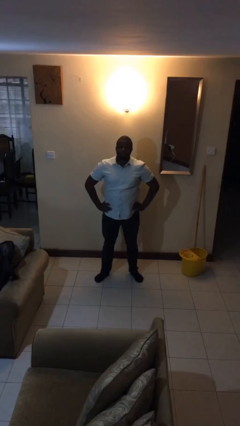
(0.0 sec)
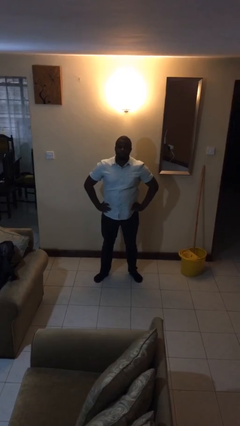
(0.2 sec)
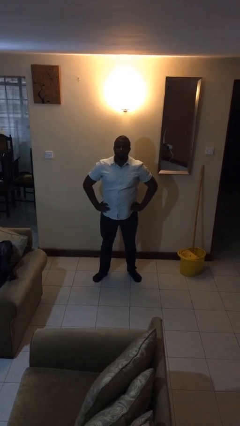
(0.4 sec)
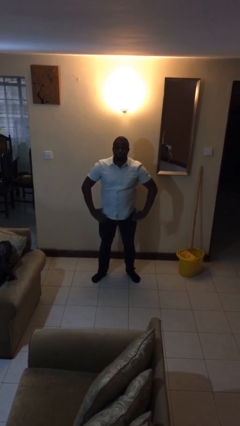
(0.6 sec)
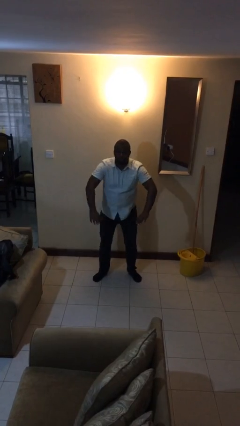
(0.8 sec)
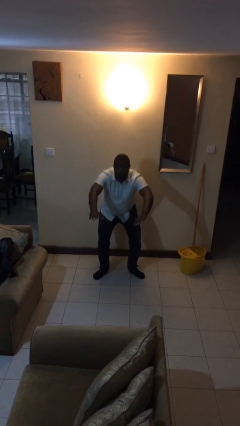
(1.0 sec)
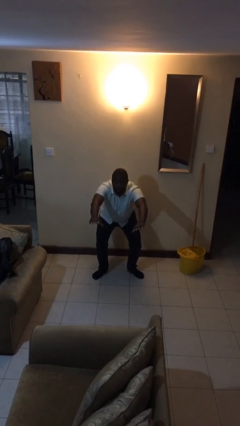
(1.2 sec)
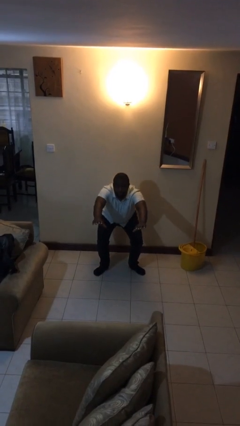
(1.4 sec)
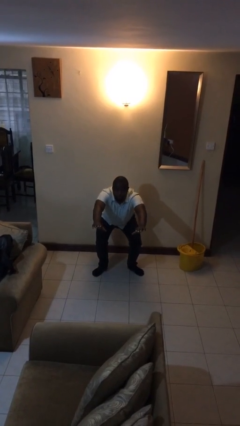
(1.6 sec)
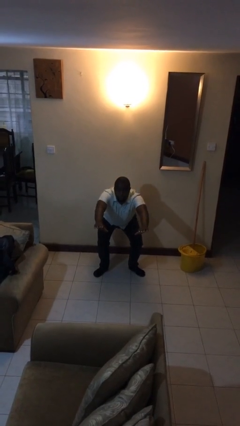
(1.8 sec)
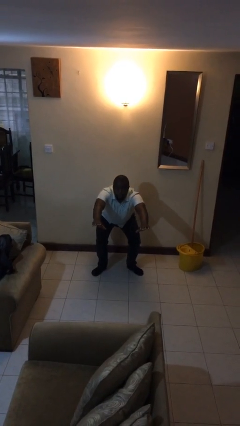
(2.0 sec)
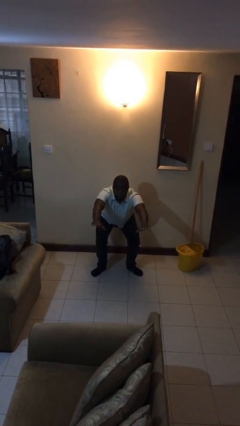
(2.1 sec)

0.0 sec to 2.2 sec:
person squats

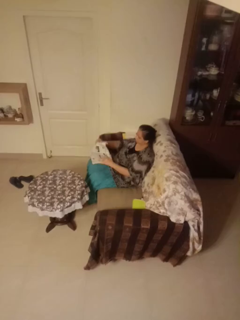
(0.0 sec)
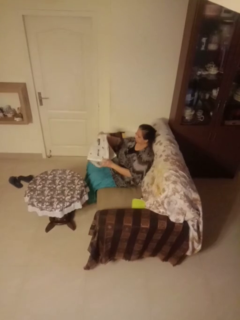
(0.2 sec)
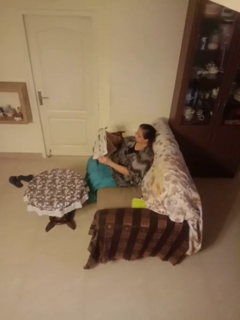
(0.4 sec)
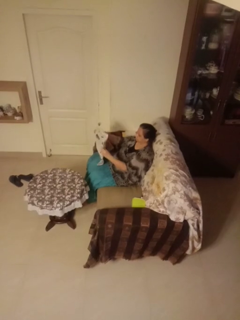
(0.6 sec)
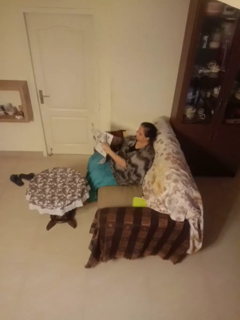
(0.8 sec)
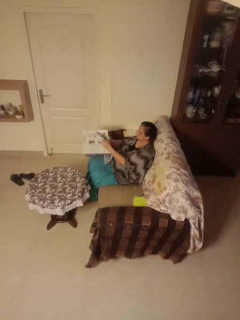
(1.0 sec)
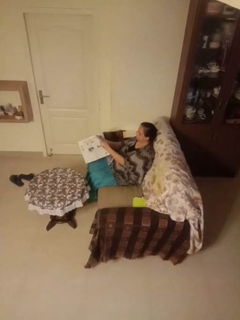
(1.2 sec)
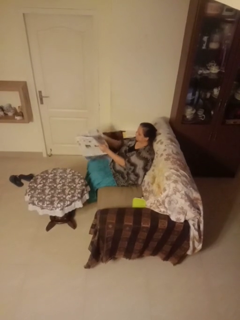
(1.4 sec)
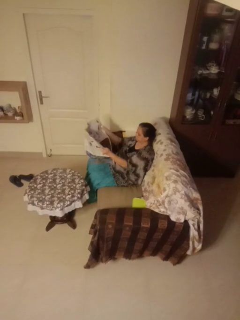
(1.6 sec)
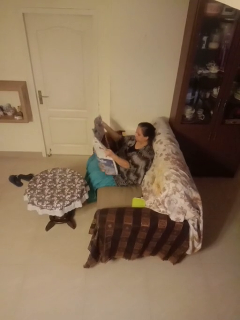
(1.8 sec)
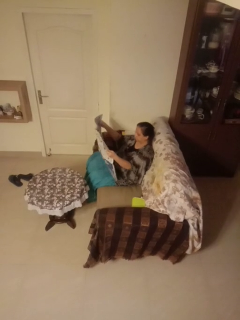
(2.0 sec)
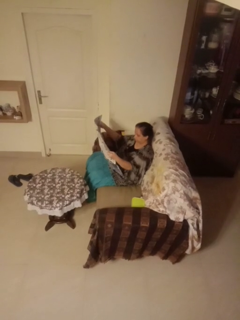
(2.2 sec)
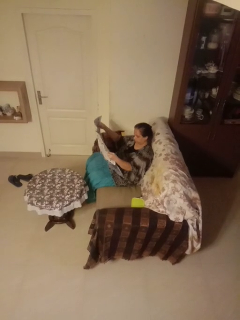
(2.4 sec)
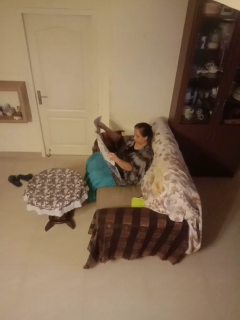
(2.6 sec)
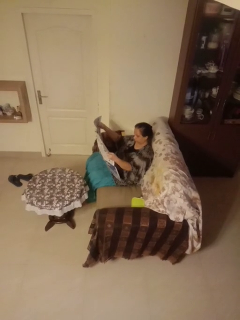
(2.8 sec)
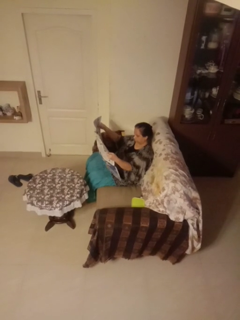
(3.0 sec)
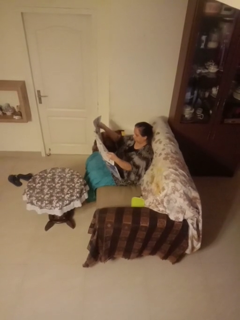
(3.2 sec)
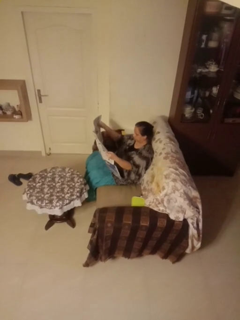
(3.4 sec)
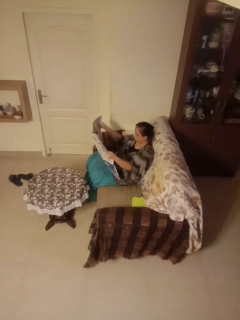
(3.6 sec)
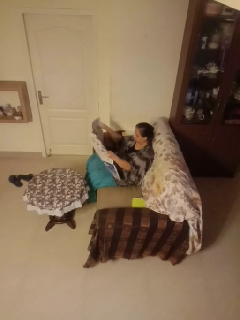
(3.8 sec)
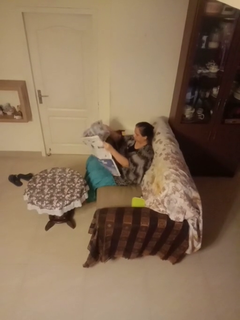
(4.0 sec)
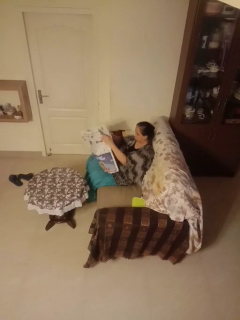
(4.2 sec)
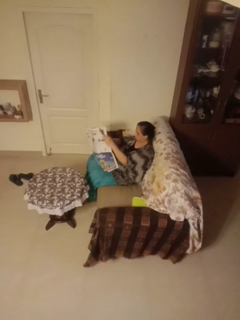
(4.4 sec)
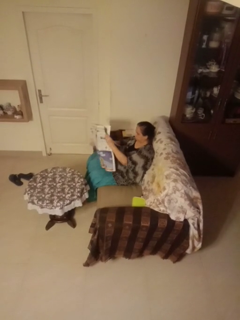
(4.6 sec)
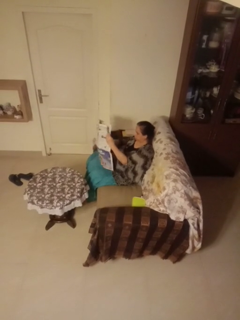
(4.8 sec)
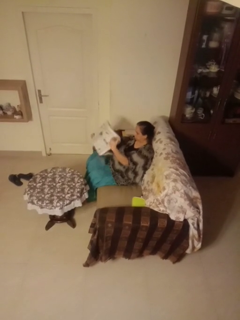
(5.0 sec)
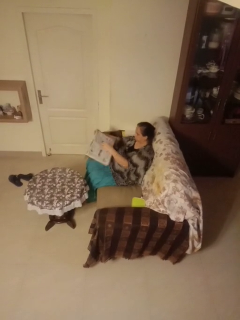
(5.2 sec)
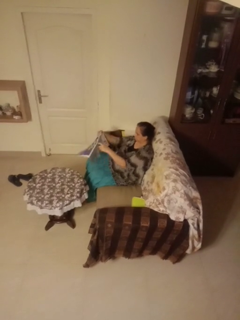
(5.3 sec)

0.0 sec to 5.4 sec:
person reads newspaper

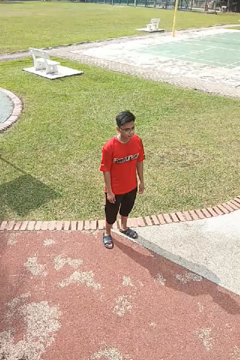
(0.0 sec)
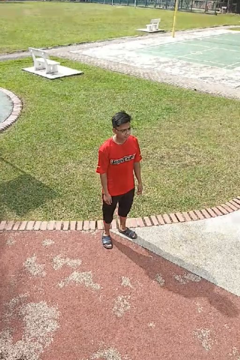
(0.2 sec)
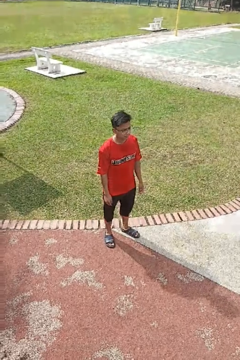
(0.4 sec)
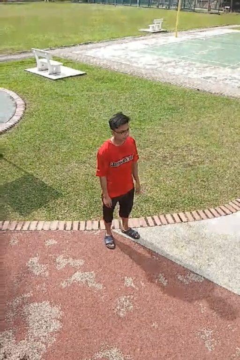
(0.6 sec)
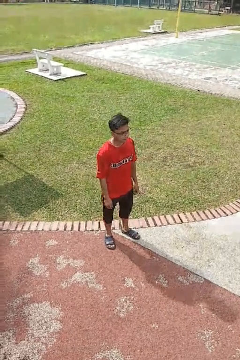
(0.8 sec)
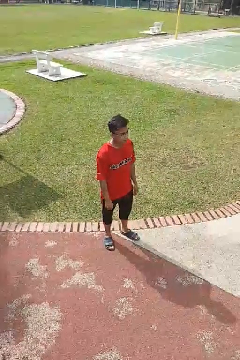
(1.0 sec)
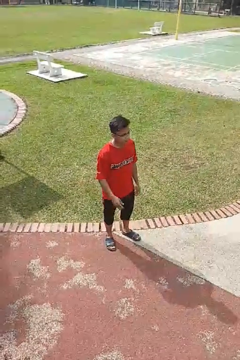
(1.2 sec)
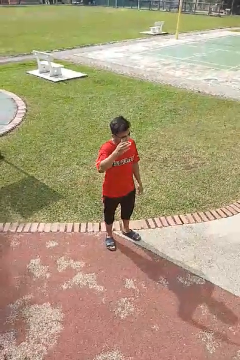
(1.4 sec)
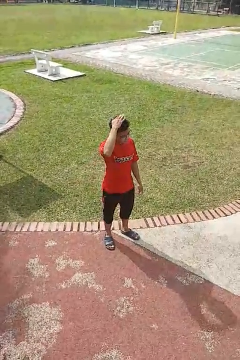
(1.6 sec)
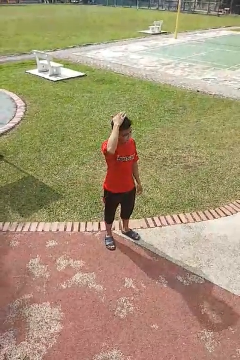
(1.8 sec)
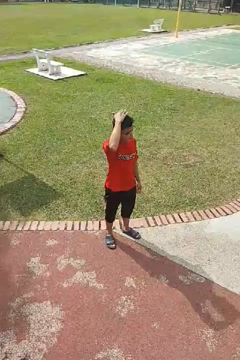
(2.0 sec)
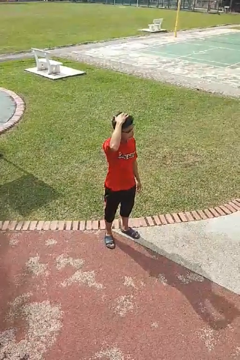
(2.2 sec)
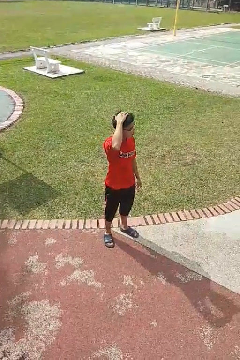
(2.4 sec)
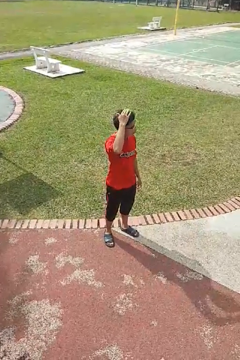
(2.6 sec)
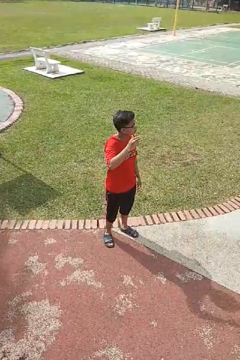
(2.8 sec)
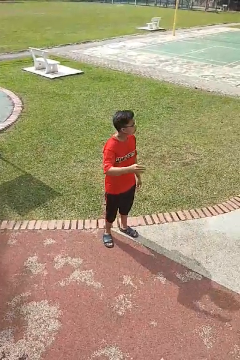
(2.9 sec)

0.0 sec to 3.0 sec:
person pats head

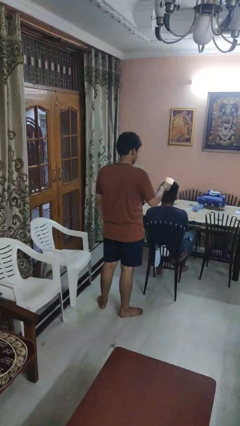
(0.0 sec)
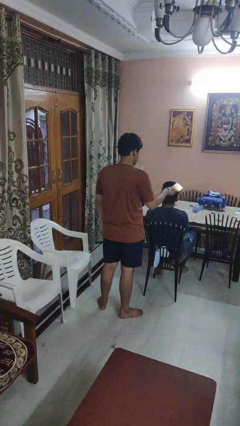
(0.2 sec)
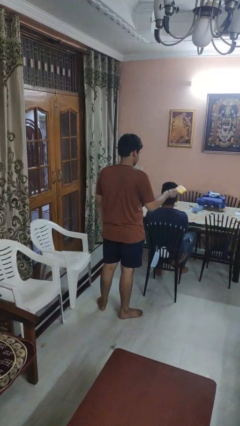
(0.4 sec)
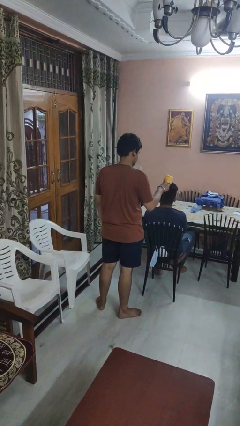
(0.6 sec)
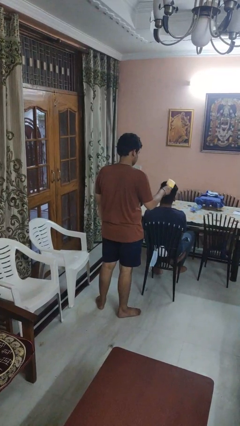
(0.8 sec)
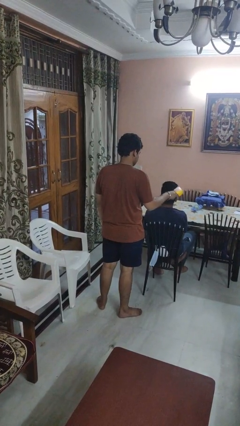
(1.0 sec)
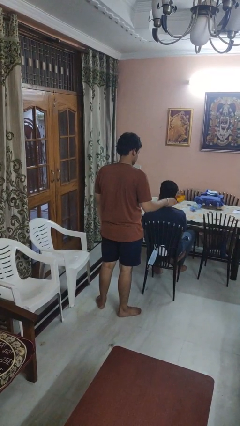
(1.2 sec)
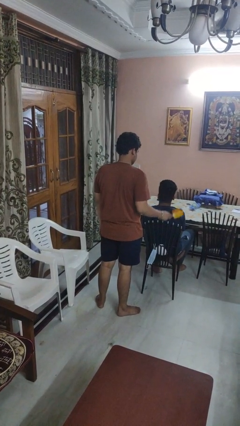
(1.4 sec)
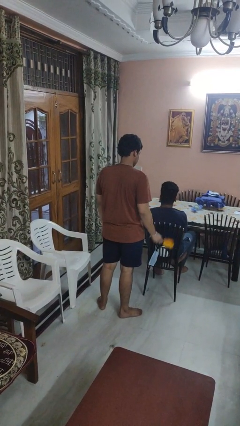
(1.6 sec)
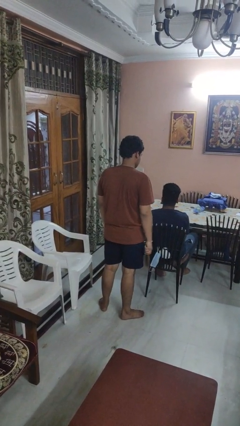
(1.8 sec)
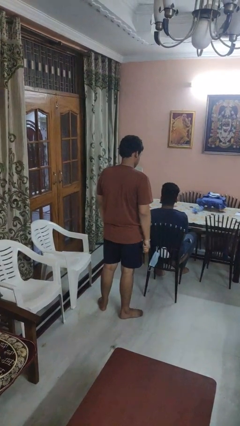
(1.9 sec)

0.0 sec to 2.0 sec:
person brushes hair of person

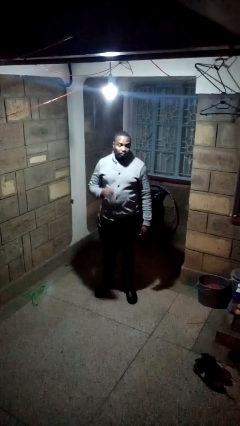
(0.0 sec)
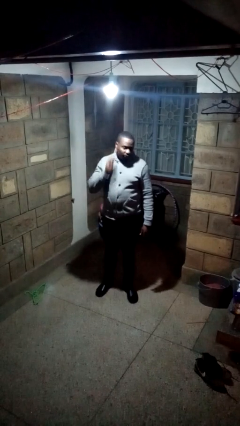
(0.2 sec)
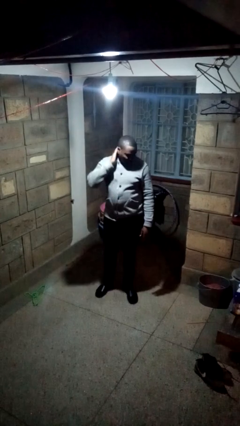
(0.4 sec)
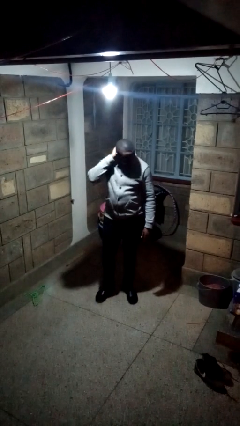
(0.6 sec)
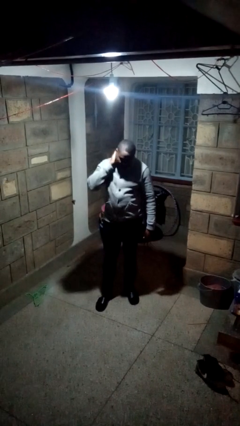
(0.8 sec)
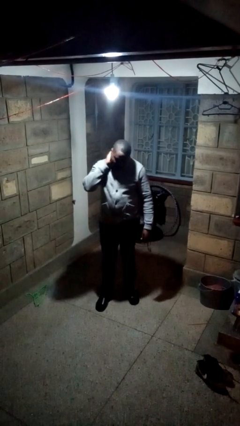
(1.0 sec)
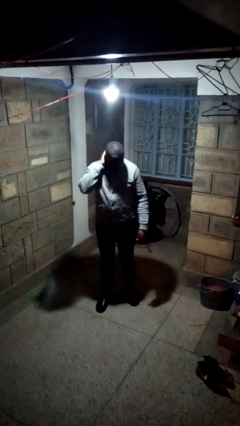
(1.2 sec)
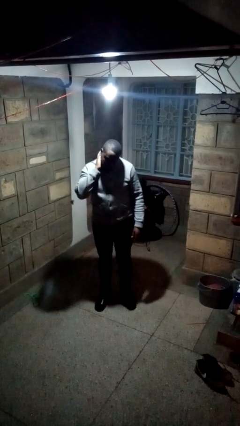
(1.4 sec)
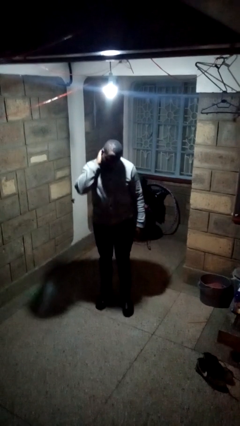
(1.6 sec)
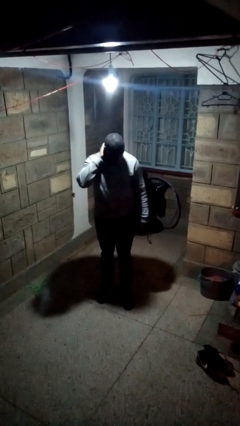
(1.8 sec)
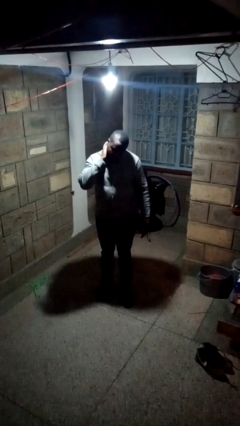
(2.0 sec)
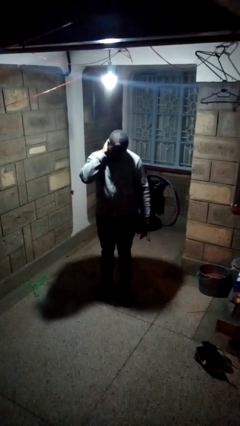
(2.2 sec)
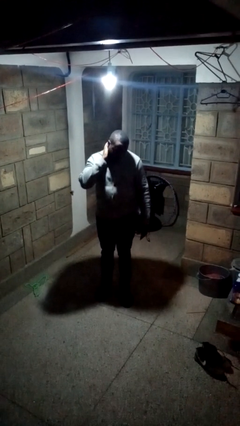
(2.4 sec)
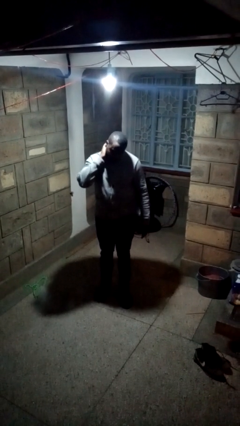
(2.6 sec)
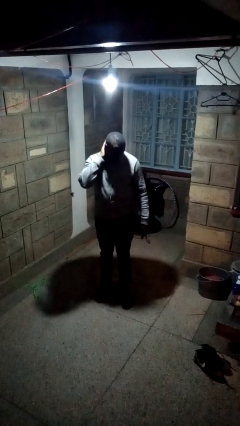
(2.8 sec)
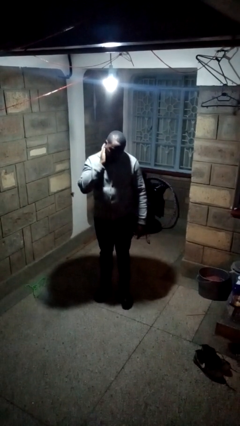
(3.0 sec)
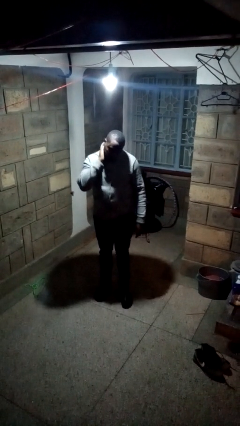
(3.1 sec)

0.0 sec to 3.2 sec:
person rubs neck

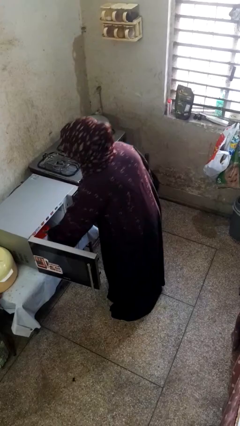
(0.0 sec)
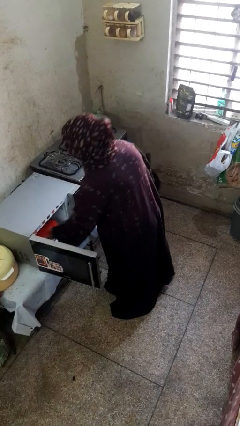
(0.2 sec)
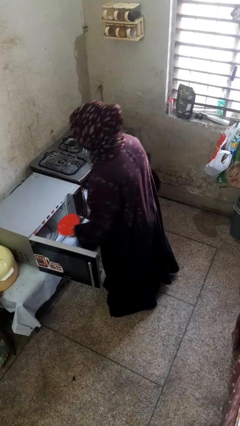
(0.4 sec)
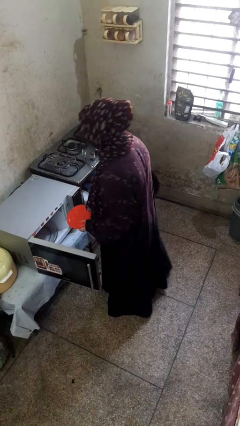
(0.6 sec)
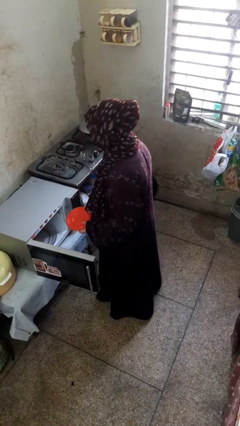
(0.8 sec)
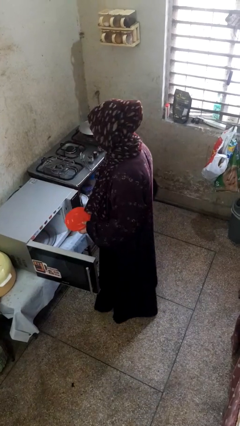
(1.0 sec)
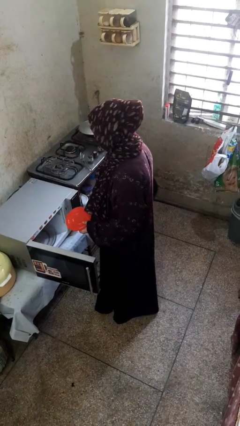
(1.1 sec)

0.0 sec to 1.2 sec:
person takes object from microwave

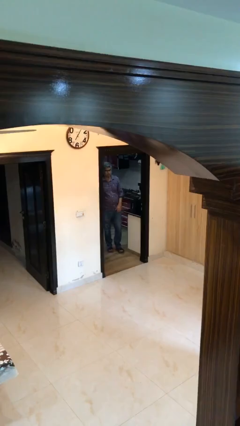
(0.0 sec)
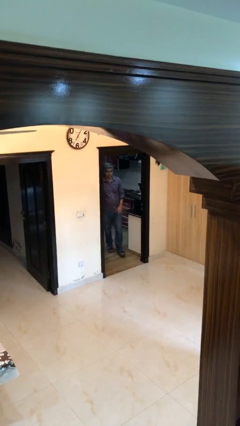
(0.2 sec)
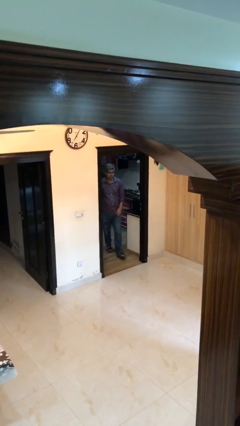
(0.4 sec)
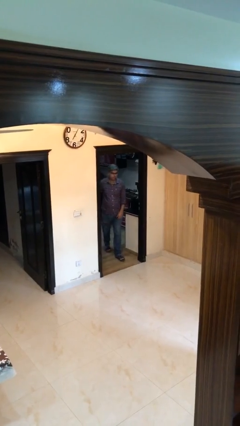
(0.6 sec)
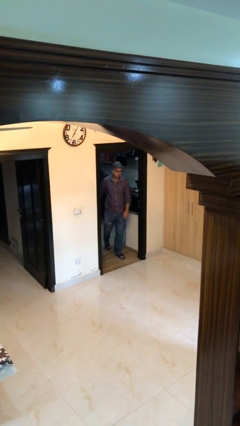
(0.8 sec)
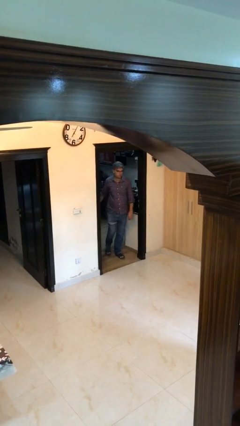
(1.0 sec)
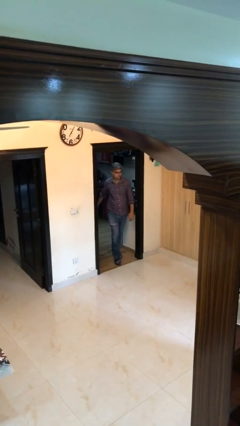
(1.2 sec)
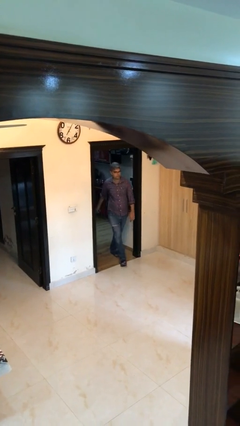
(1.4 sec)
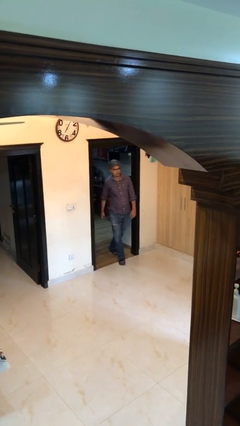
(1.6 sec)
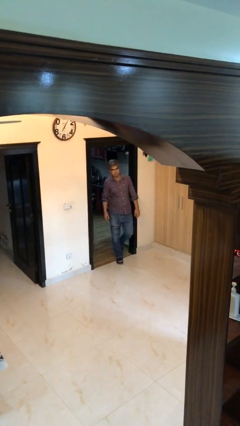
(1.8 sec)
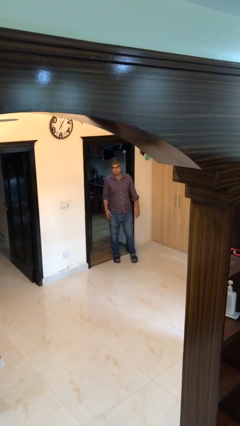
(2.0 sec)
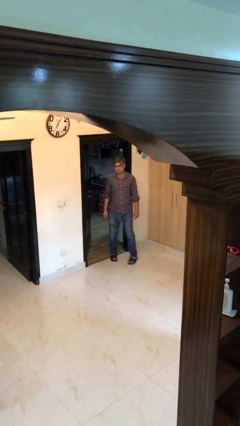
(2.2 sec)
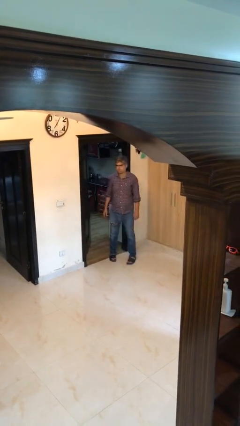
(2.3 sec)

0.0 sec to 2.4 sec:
person enters scene through structure
